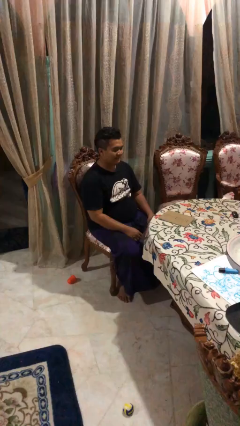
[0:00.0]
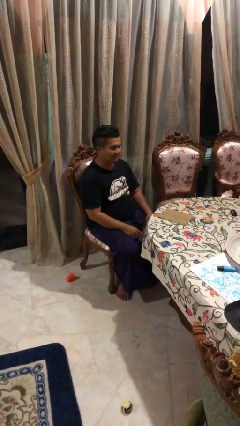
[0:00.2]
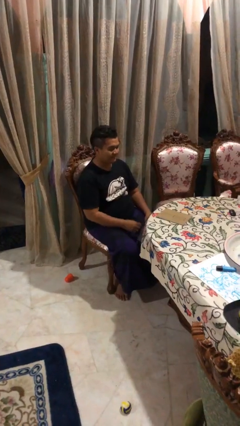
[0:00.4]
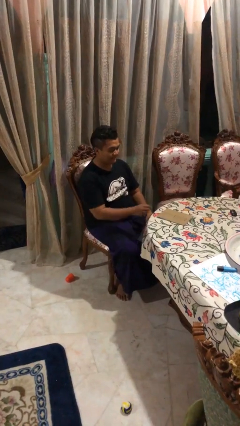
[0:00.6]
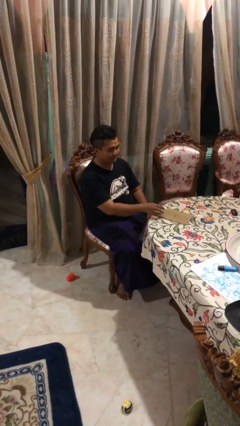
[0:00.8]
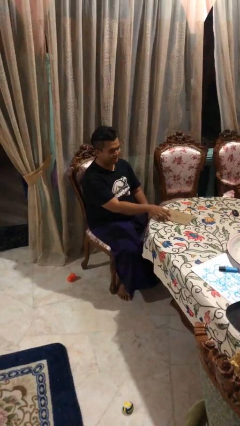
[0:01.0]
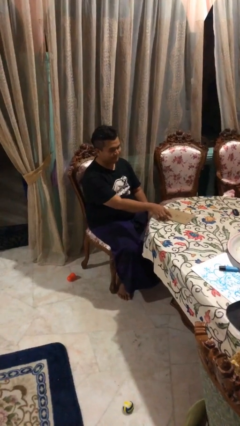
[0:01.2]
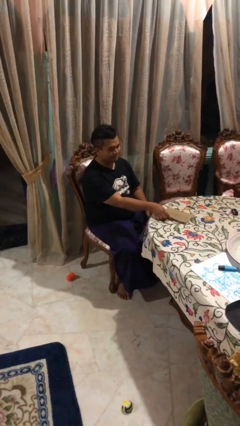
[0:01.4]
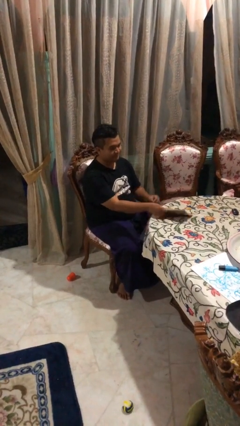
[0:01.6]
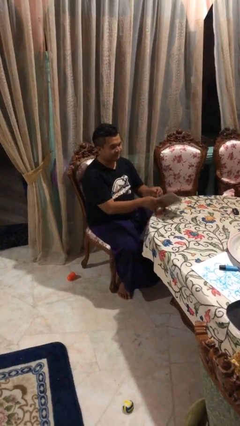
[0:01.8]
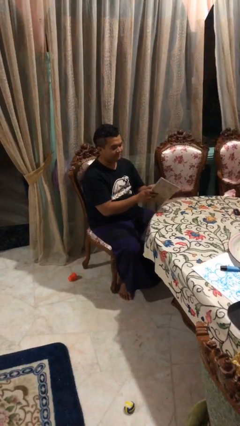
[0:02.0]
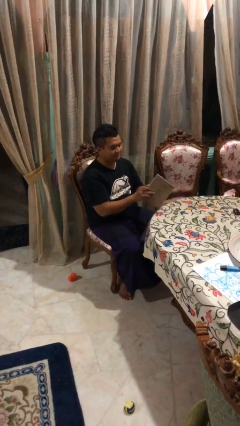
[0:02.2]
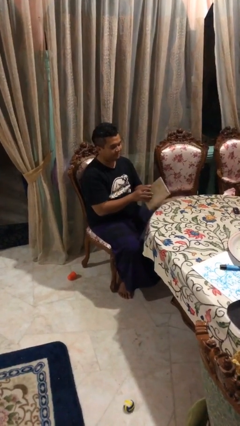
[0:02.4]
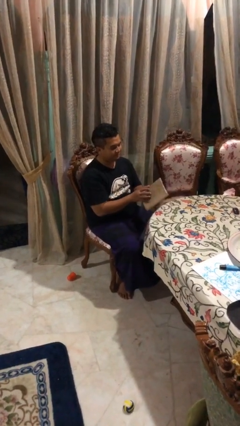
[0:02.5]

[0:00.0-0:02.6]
person picks up object from table

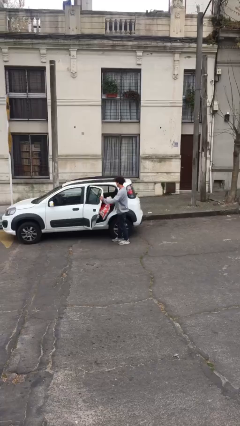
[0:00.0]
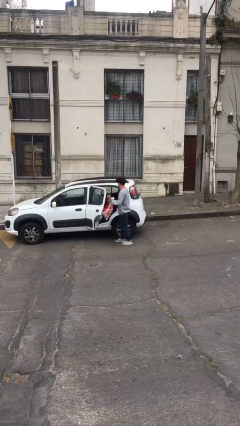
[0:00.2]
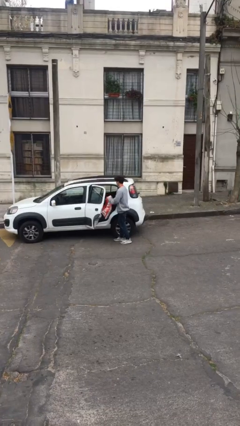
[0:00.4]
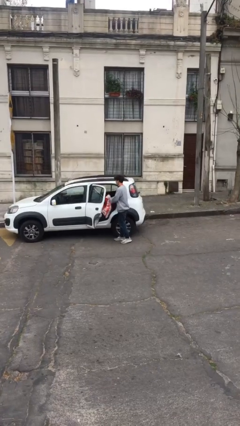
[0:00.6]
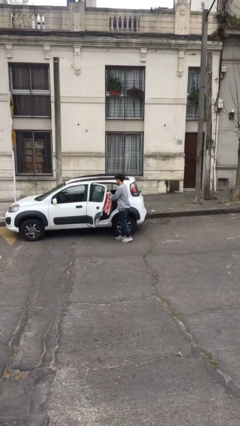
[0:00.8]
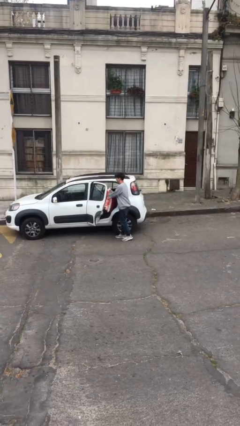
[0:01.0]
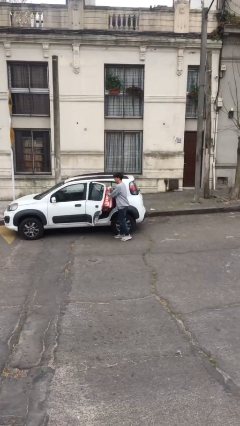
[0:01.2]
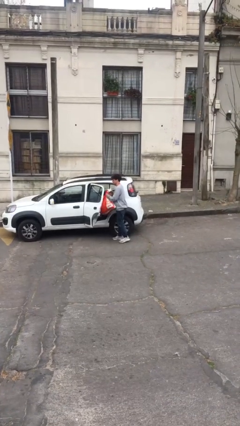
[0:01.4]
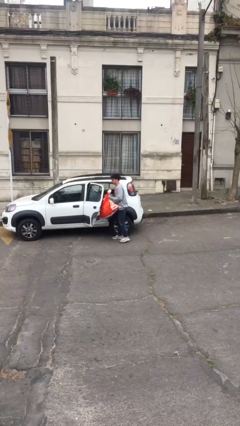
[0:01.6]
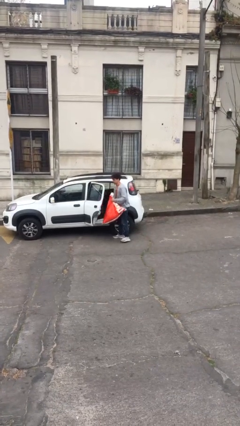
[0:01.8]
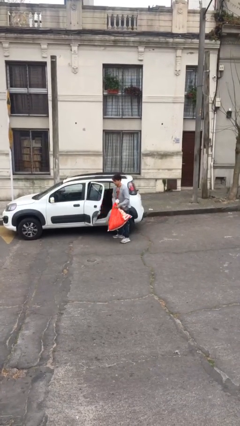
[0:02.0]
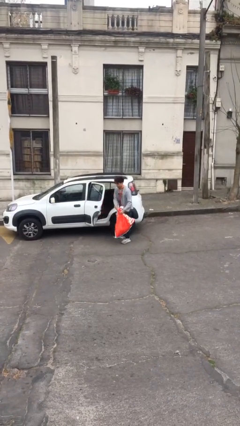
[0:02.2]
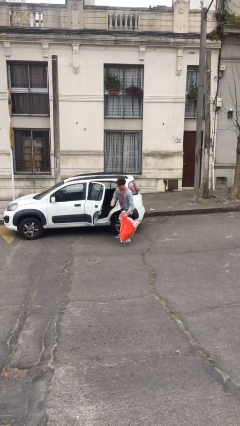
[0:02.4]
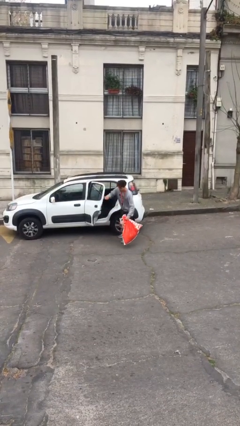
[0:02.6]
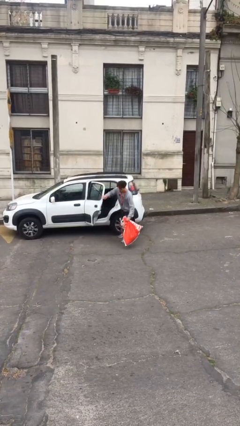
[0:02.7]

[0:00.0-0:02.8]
person unloads car

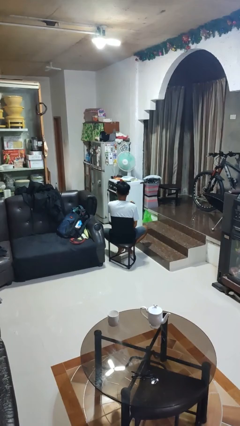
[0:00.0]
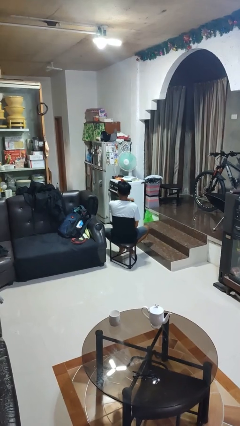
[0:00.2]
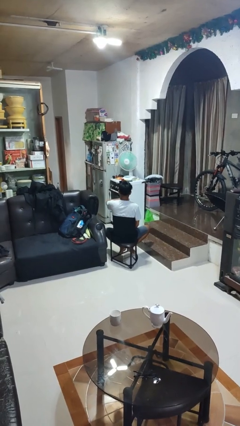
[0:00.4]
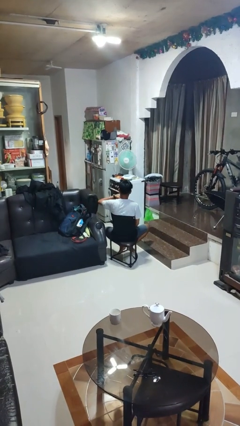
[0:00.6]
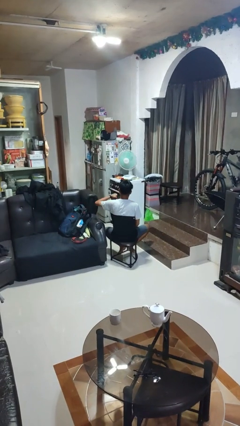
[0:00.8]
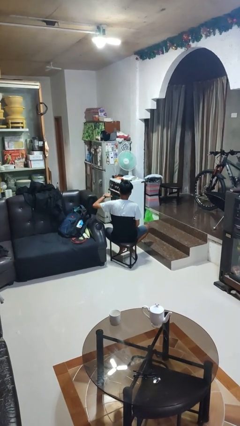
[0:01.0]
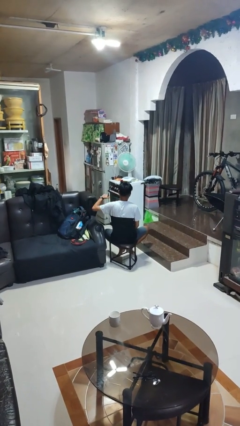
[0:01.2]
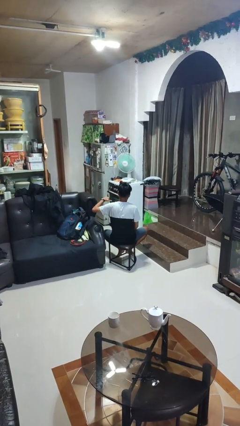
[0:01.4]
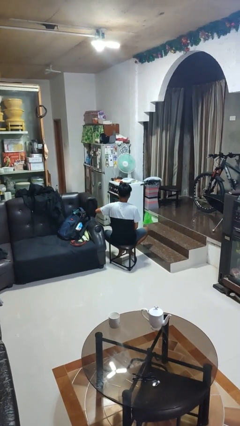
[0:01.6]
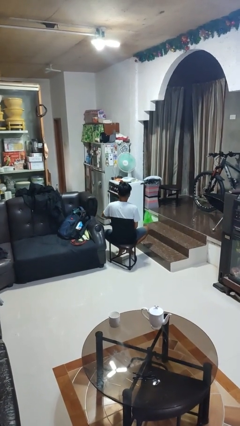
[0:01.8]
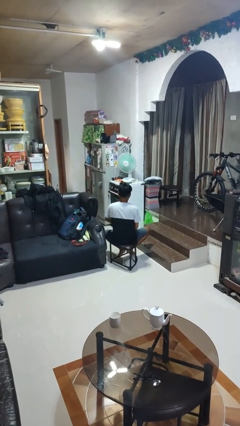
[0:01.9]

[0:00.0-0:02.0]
person gestures cut

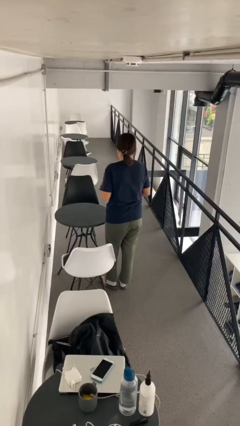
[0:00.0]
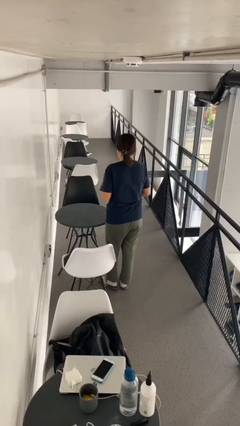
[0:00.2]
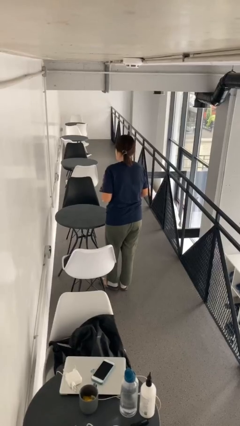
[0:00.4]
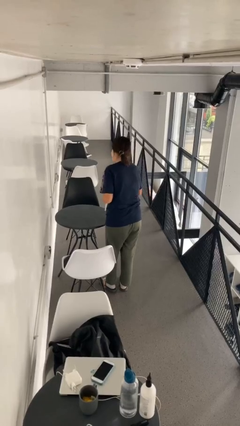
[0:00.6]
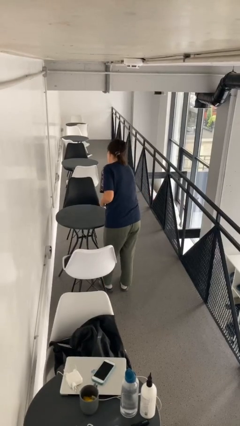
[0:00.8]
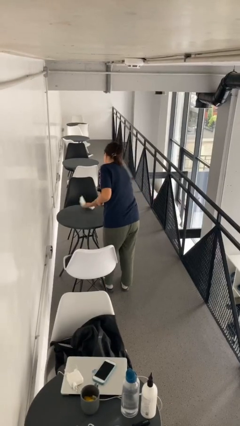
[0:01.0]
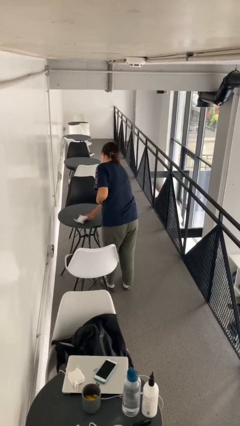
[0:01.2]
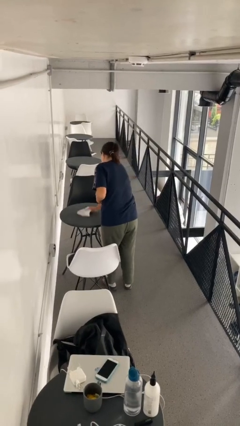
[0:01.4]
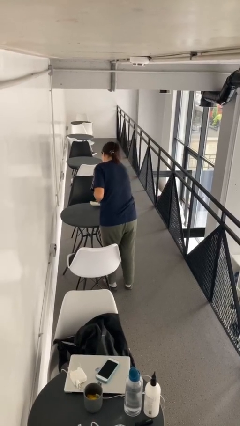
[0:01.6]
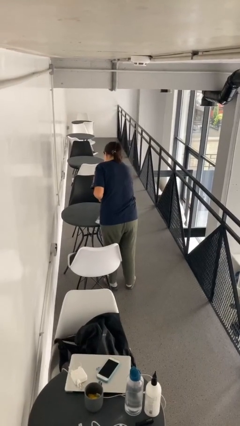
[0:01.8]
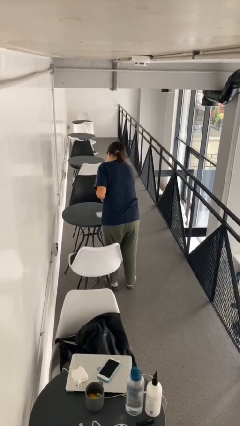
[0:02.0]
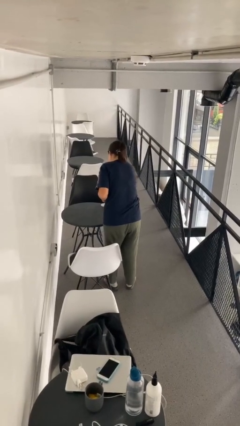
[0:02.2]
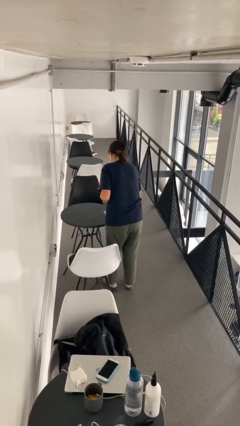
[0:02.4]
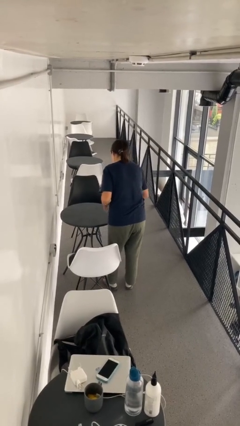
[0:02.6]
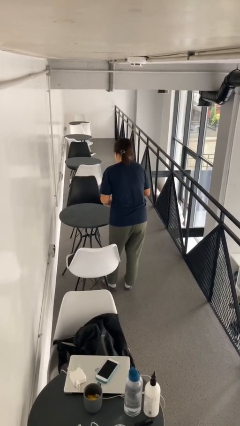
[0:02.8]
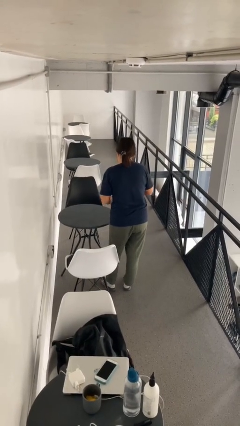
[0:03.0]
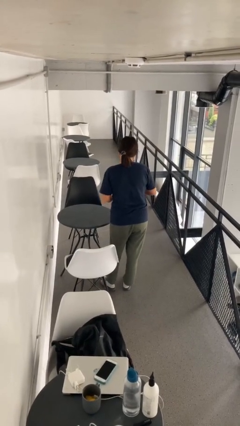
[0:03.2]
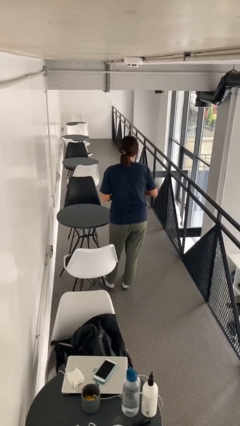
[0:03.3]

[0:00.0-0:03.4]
person cleans table with rag

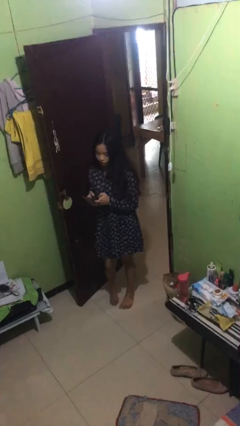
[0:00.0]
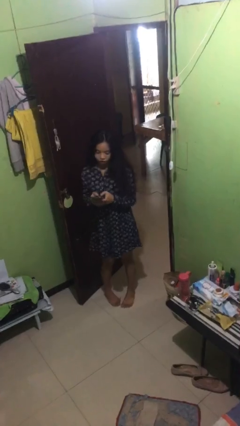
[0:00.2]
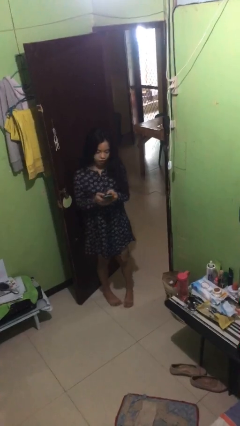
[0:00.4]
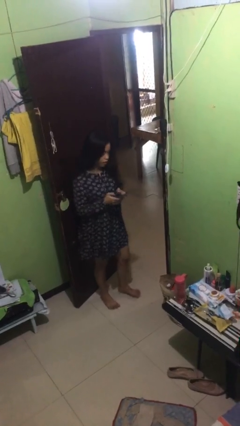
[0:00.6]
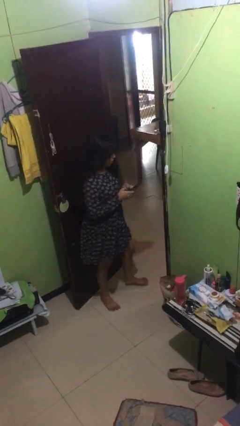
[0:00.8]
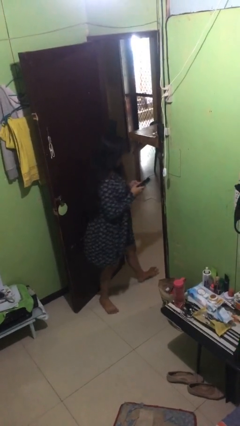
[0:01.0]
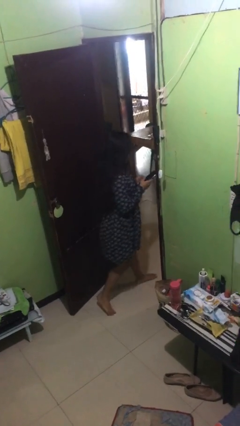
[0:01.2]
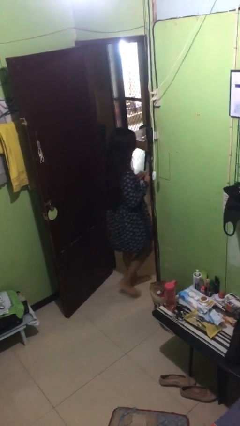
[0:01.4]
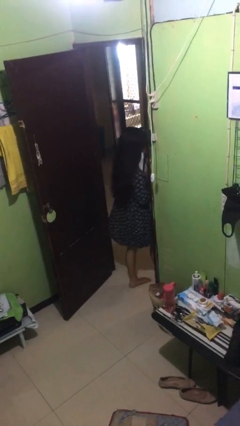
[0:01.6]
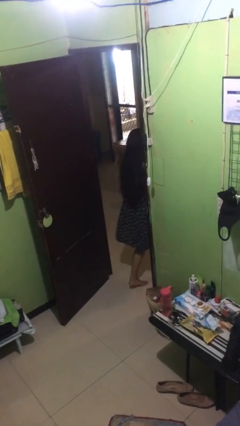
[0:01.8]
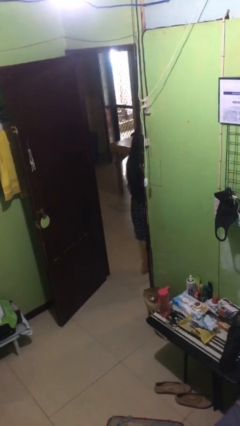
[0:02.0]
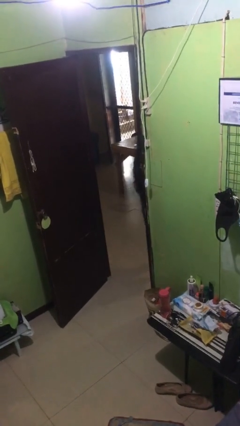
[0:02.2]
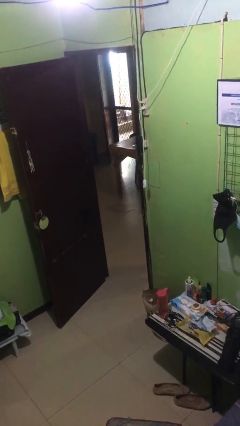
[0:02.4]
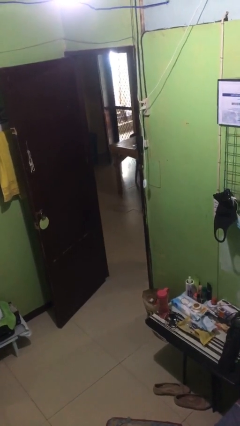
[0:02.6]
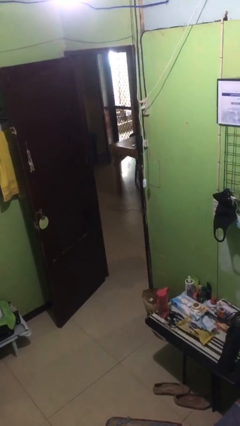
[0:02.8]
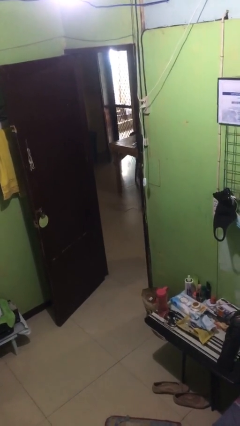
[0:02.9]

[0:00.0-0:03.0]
person exits scene through structure

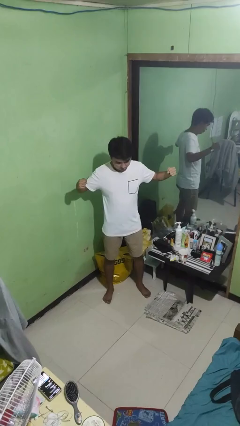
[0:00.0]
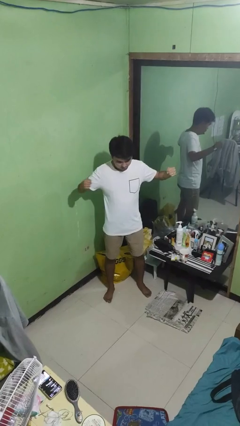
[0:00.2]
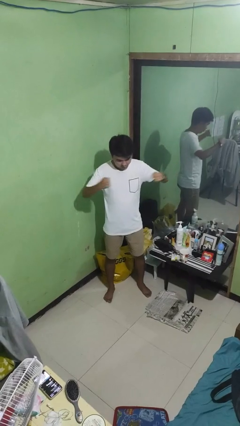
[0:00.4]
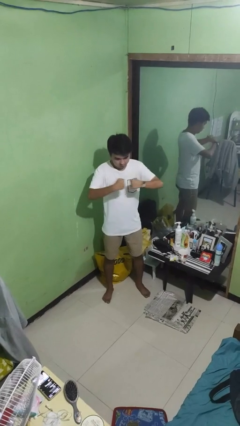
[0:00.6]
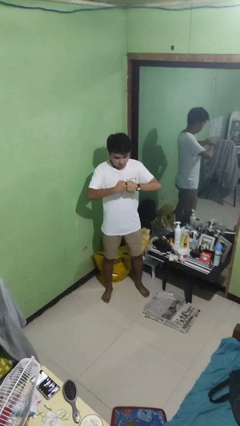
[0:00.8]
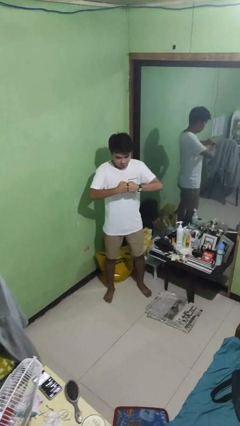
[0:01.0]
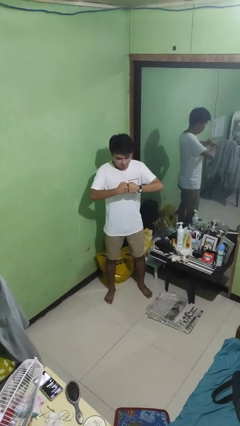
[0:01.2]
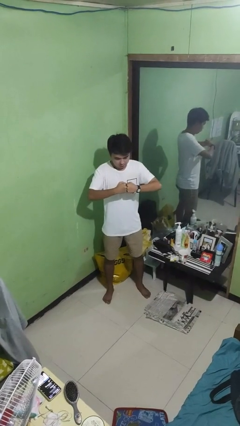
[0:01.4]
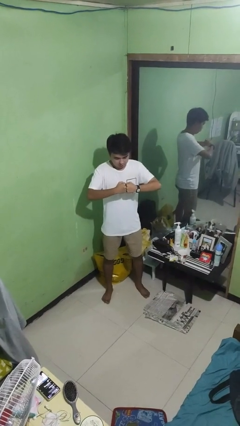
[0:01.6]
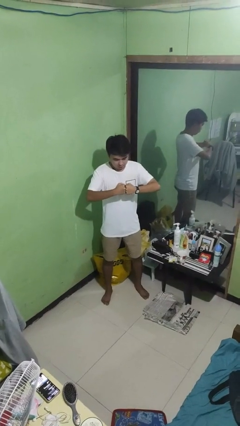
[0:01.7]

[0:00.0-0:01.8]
person gestures zoom out

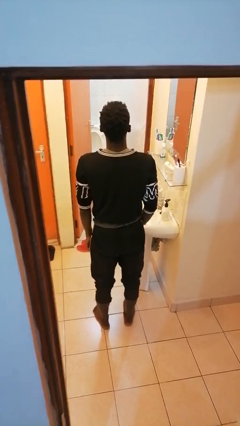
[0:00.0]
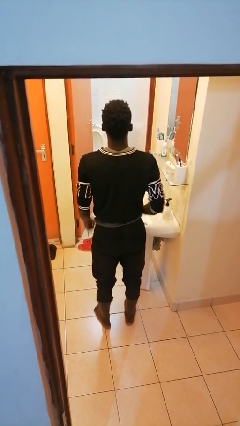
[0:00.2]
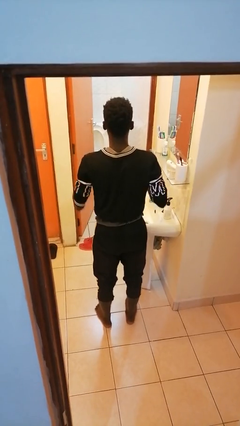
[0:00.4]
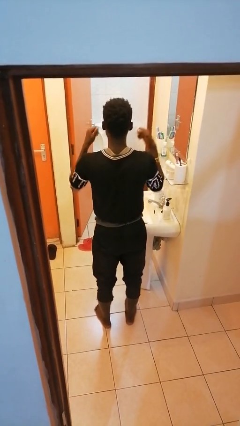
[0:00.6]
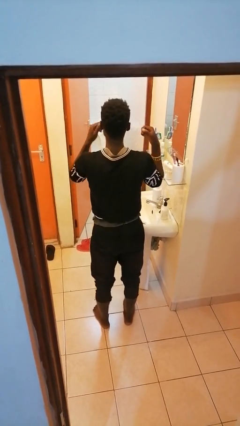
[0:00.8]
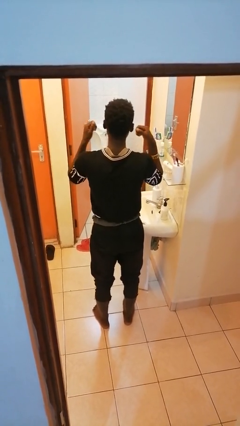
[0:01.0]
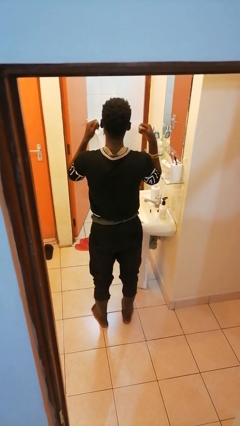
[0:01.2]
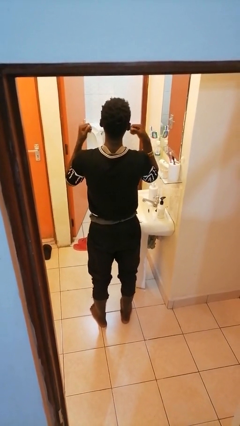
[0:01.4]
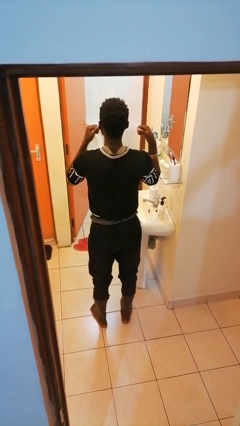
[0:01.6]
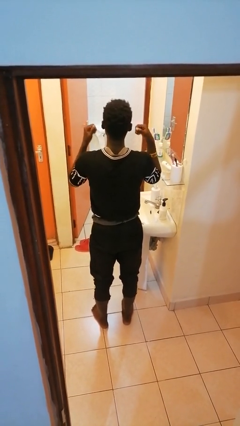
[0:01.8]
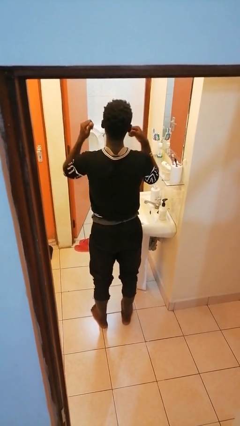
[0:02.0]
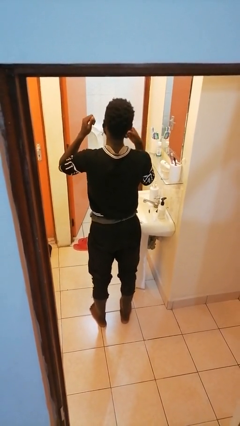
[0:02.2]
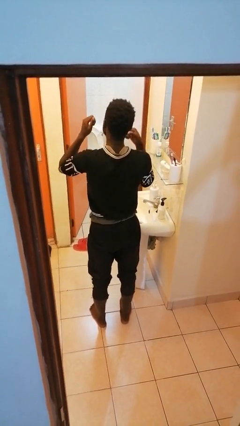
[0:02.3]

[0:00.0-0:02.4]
person flosses
